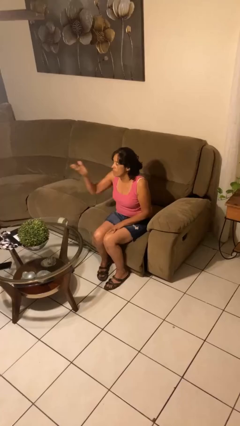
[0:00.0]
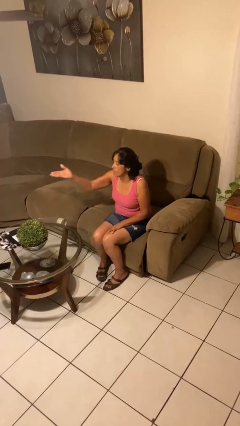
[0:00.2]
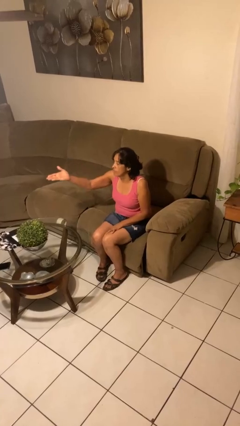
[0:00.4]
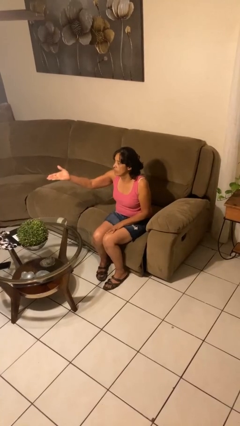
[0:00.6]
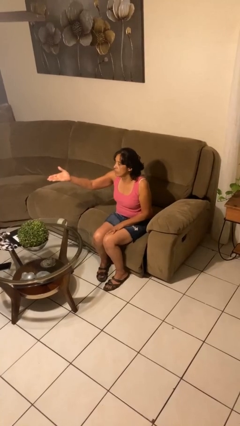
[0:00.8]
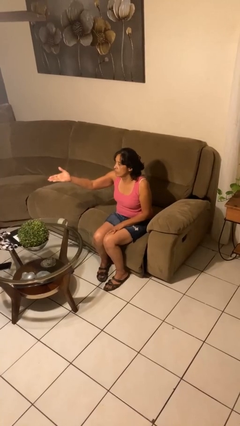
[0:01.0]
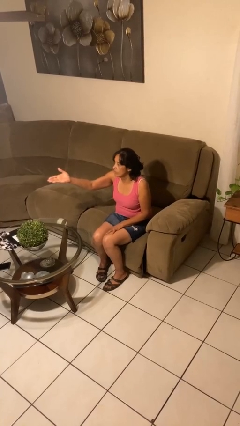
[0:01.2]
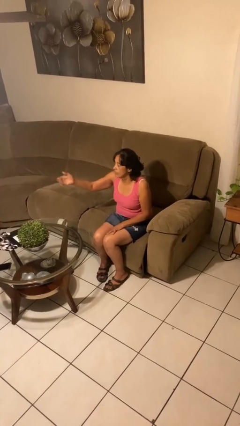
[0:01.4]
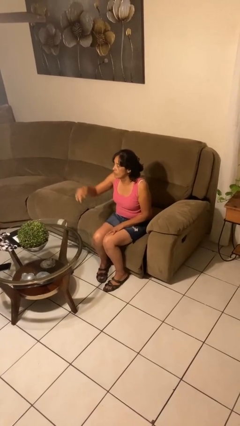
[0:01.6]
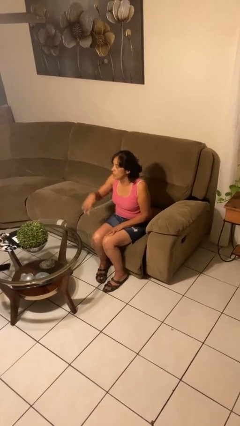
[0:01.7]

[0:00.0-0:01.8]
person gestures blow kiss

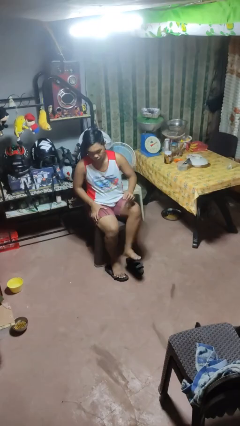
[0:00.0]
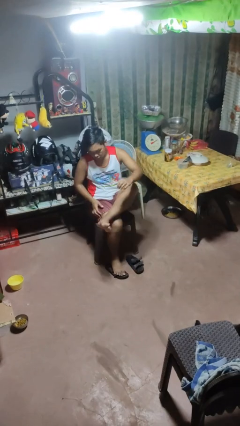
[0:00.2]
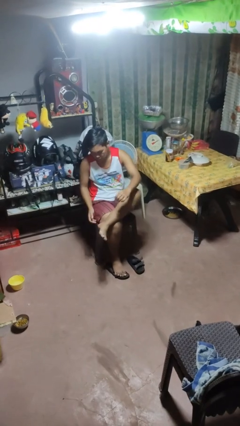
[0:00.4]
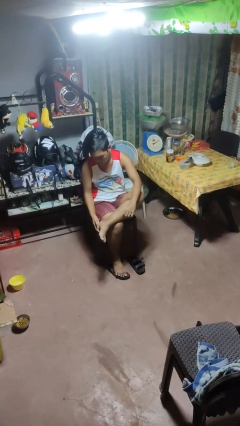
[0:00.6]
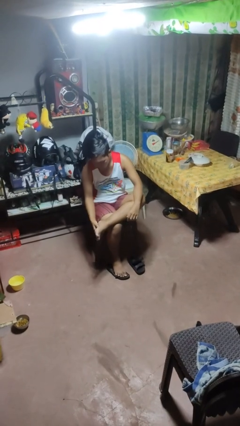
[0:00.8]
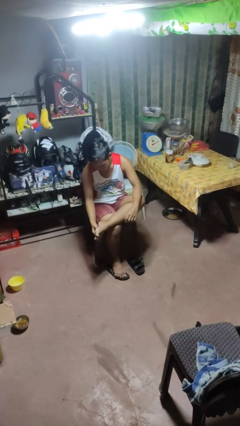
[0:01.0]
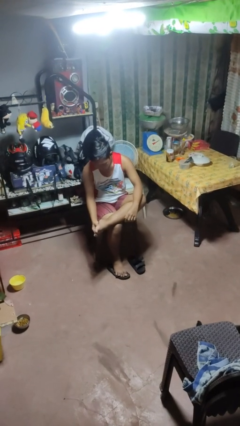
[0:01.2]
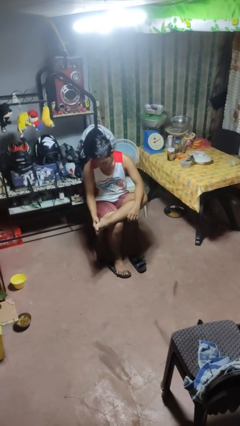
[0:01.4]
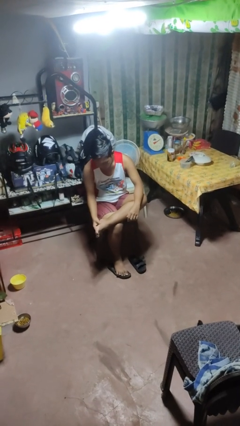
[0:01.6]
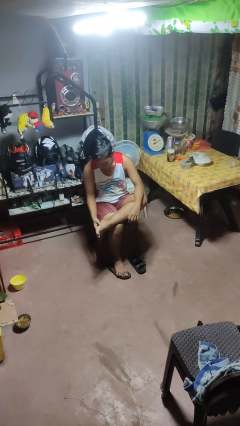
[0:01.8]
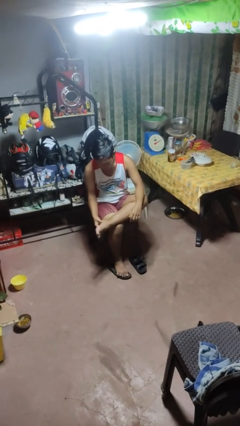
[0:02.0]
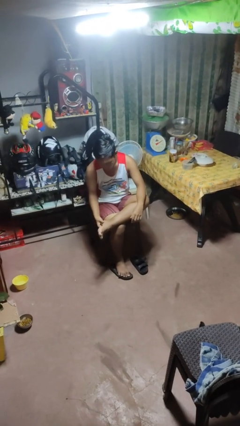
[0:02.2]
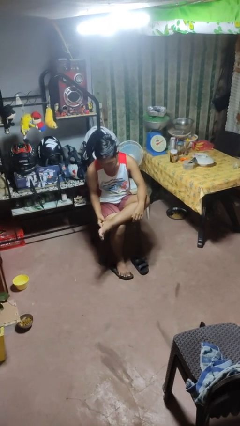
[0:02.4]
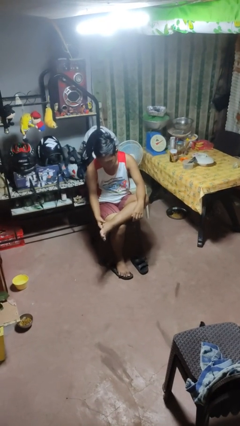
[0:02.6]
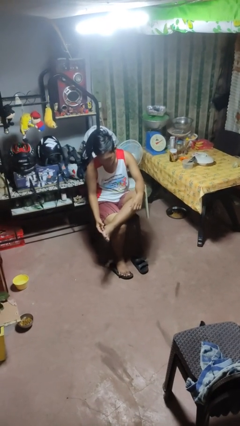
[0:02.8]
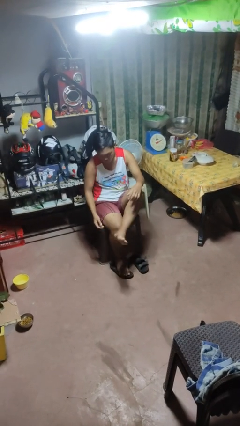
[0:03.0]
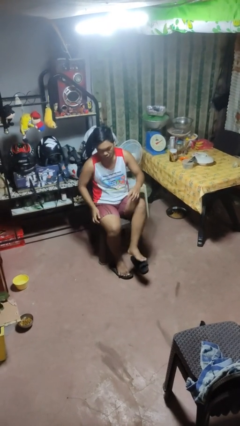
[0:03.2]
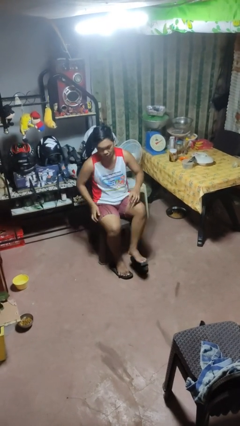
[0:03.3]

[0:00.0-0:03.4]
person rubs foot

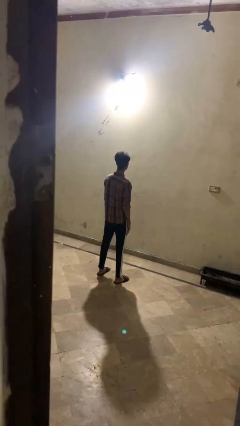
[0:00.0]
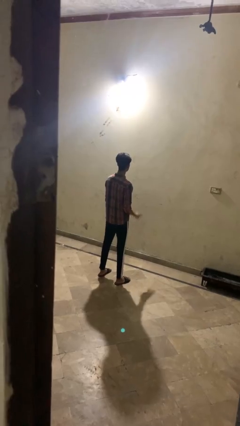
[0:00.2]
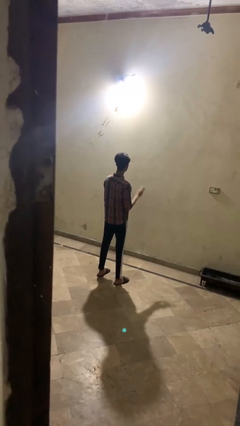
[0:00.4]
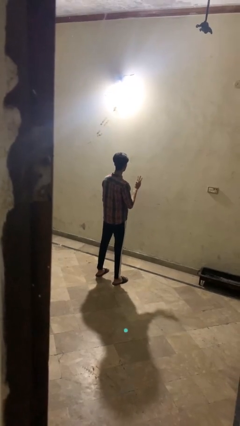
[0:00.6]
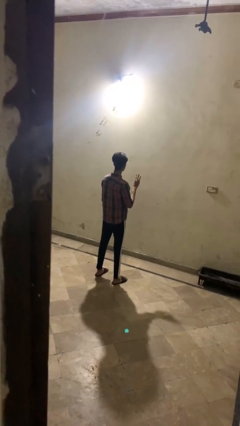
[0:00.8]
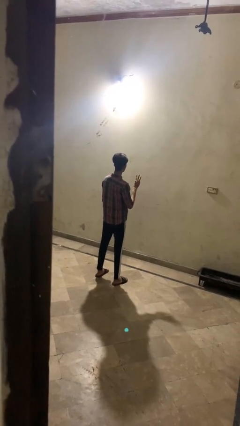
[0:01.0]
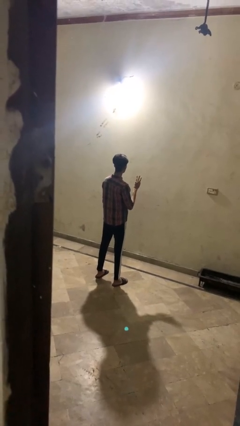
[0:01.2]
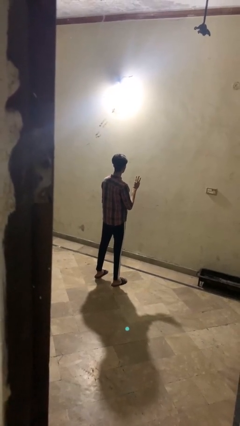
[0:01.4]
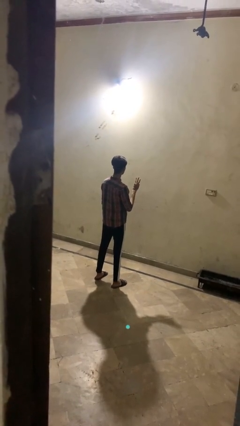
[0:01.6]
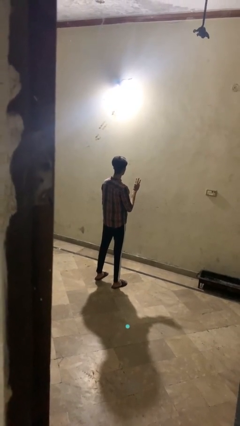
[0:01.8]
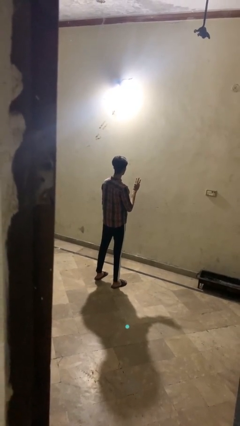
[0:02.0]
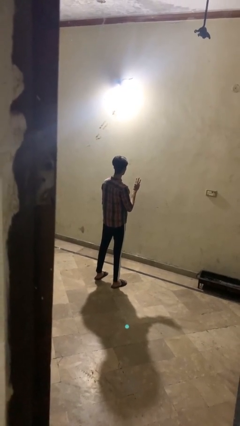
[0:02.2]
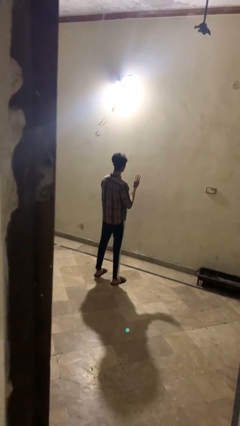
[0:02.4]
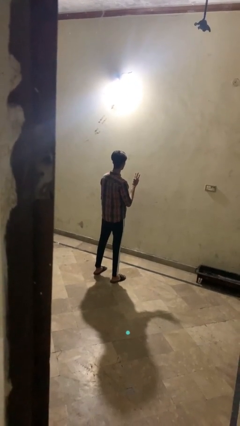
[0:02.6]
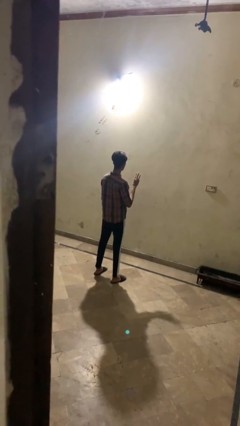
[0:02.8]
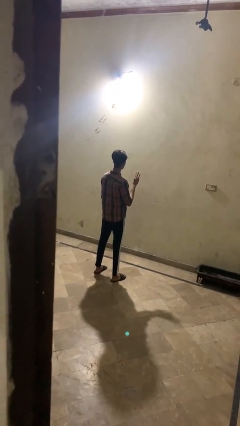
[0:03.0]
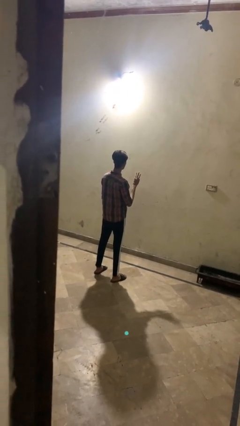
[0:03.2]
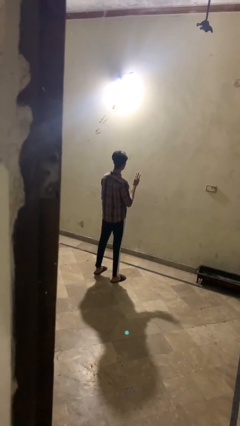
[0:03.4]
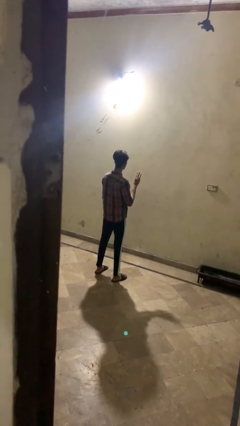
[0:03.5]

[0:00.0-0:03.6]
person gestures number three

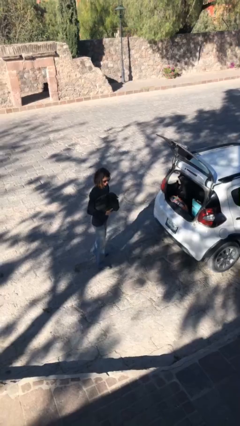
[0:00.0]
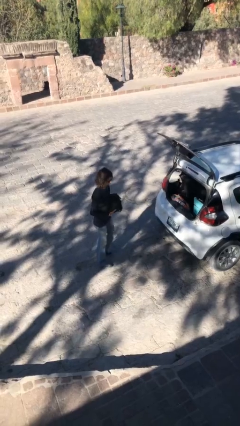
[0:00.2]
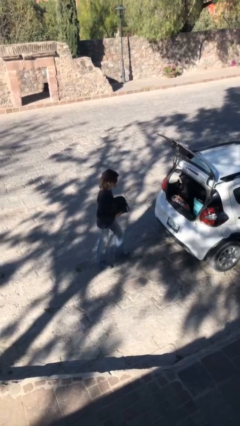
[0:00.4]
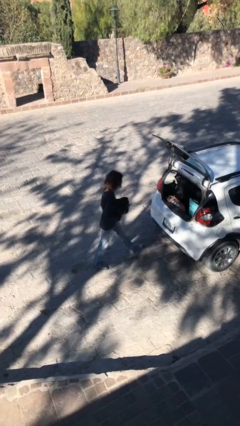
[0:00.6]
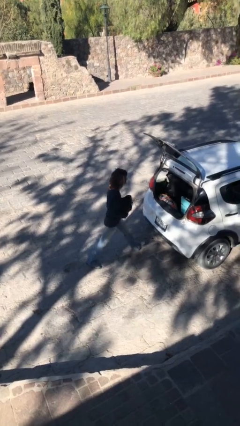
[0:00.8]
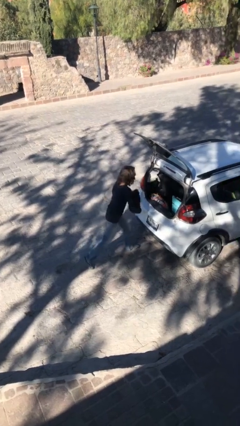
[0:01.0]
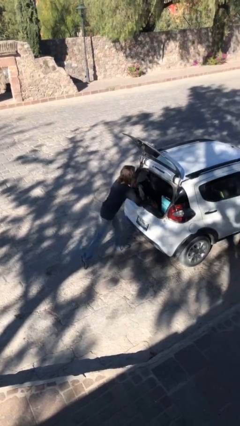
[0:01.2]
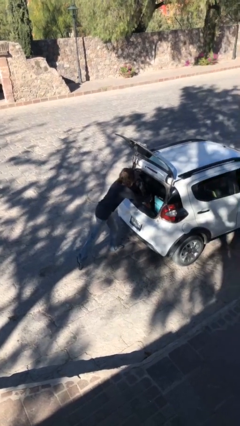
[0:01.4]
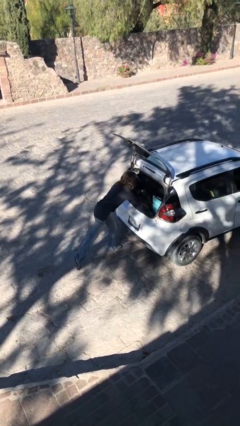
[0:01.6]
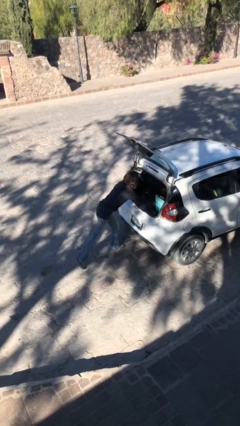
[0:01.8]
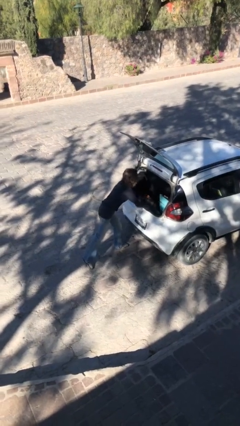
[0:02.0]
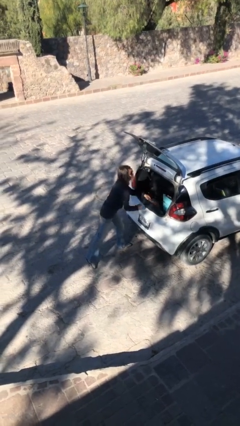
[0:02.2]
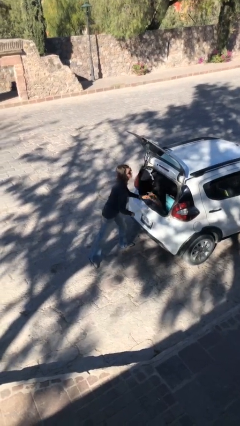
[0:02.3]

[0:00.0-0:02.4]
person loads car

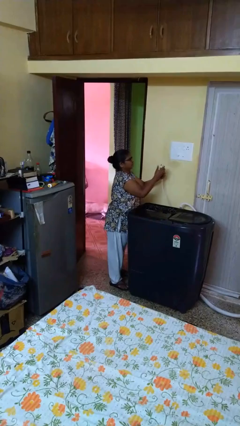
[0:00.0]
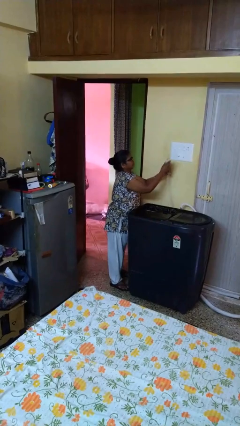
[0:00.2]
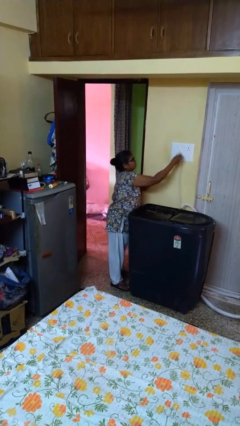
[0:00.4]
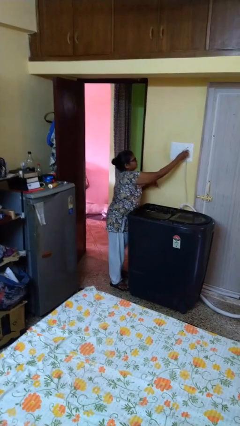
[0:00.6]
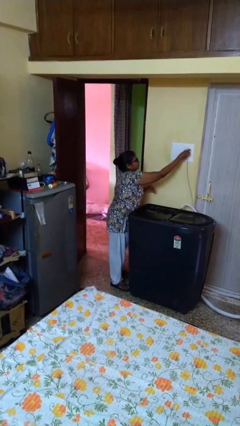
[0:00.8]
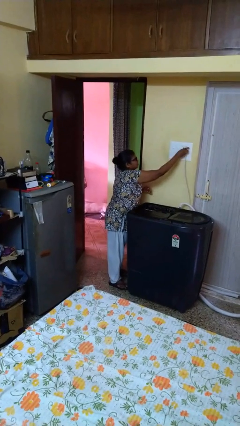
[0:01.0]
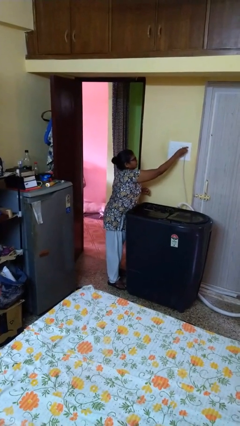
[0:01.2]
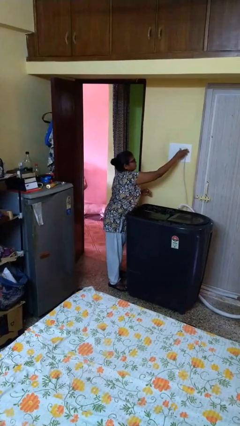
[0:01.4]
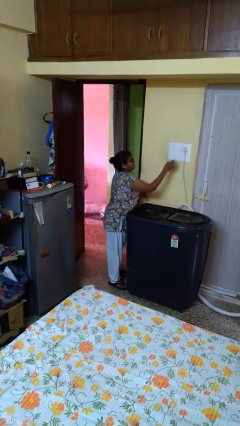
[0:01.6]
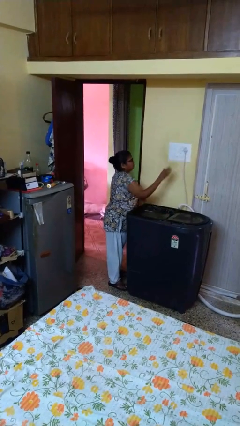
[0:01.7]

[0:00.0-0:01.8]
person plugs into electrical socket

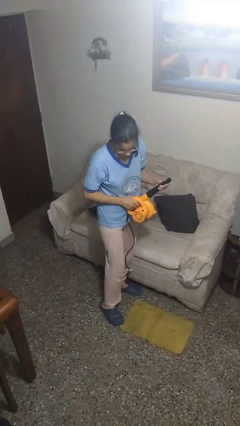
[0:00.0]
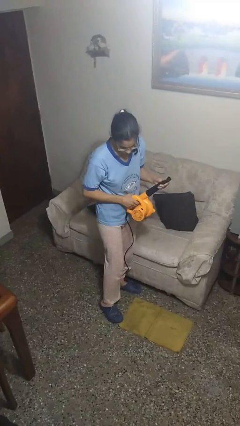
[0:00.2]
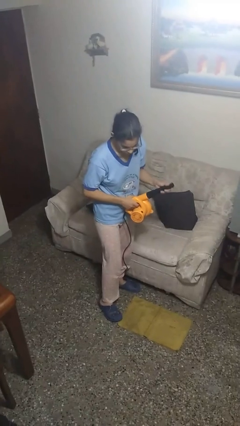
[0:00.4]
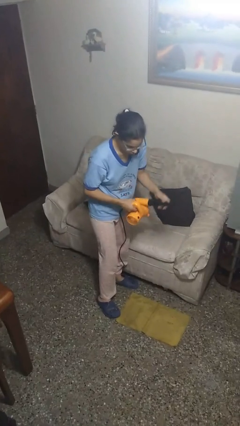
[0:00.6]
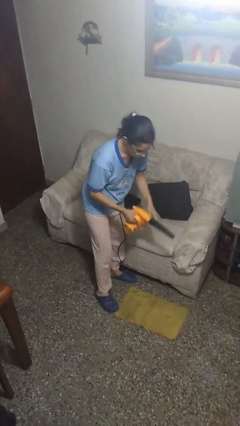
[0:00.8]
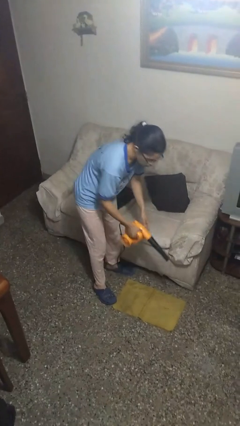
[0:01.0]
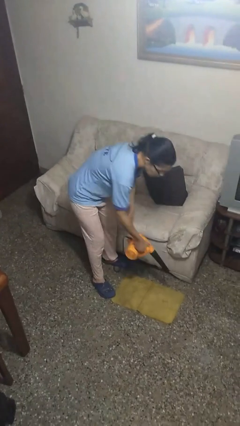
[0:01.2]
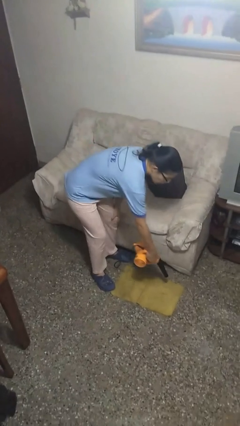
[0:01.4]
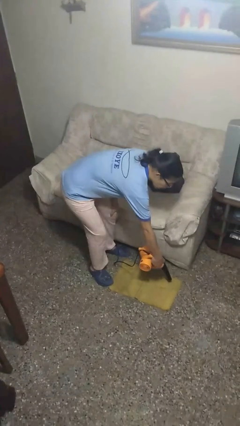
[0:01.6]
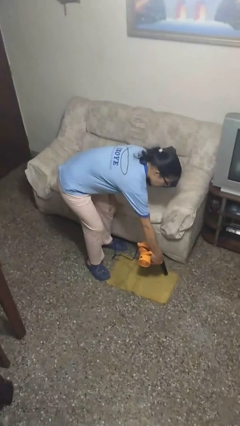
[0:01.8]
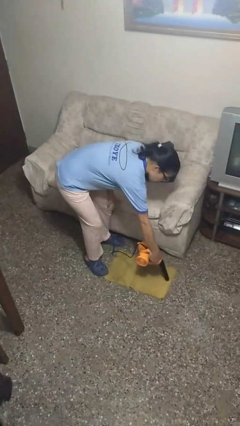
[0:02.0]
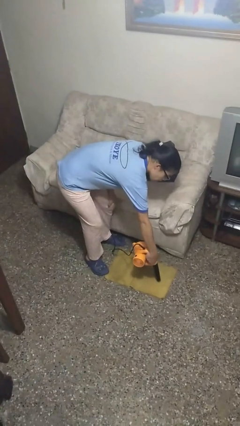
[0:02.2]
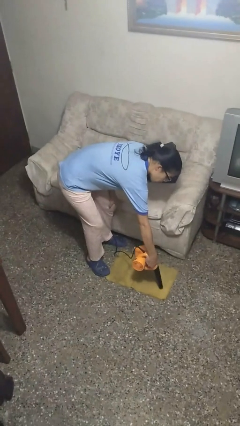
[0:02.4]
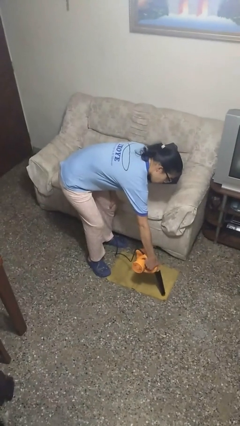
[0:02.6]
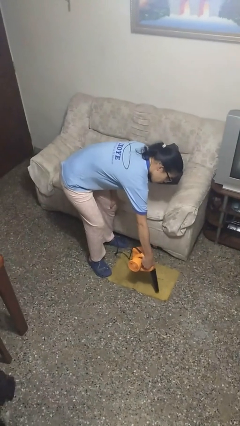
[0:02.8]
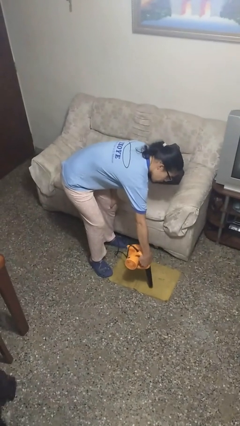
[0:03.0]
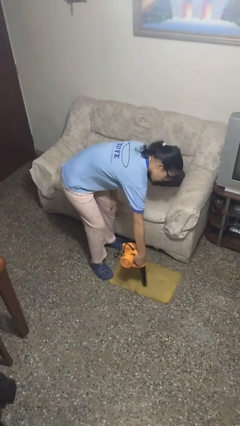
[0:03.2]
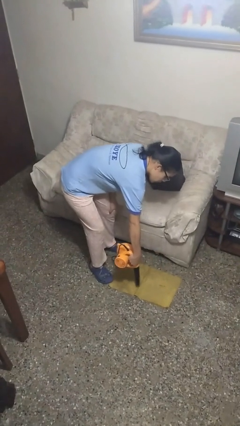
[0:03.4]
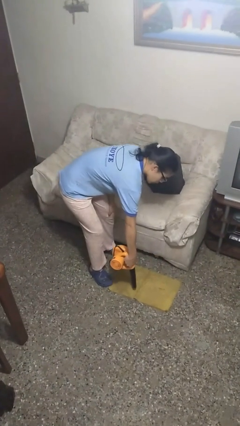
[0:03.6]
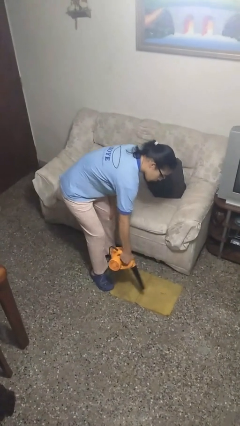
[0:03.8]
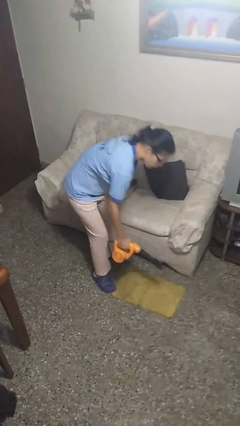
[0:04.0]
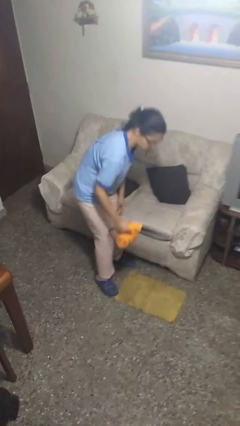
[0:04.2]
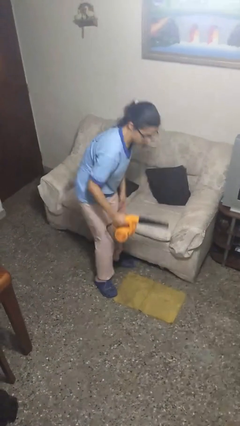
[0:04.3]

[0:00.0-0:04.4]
person vacuums carpet
